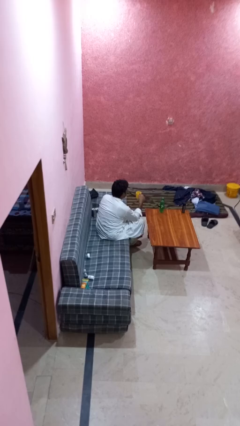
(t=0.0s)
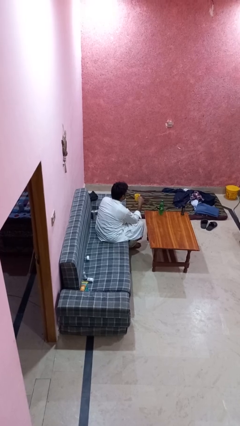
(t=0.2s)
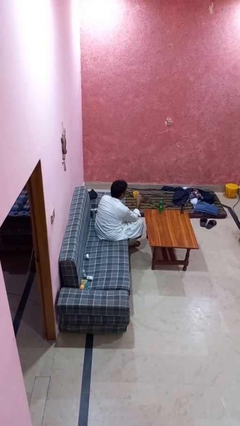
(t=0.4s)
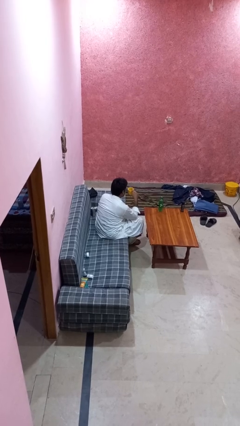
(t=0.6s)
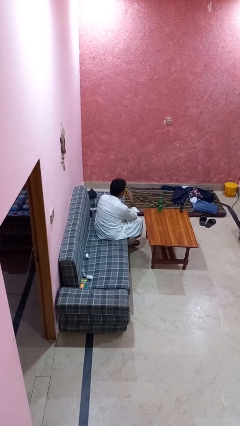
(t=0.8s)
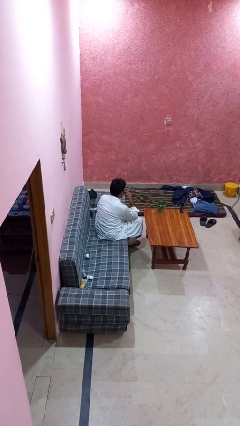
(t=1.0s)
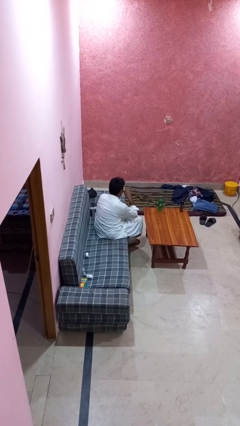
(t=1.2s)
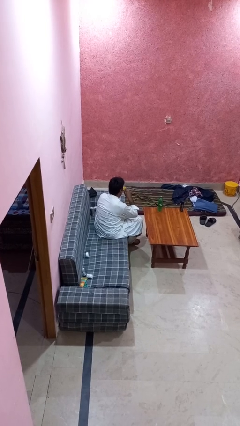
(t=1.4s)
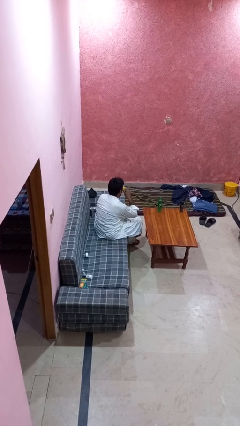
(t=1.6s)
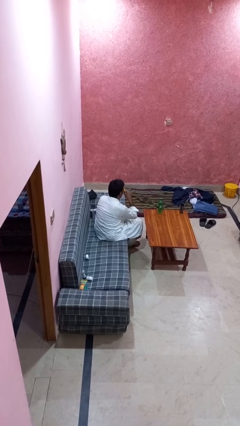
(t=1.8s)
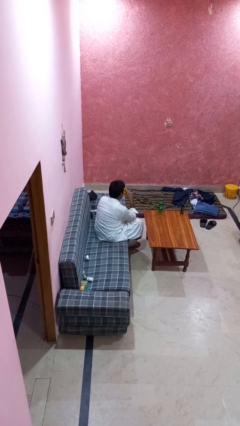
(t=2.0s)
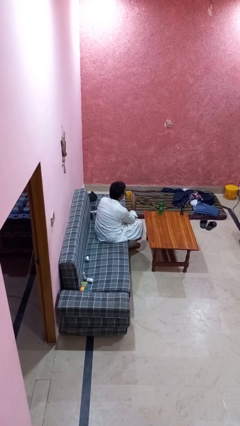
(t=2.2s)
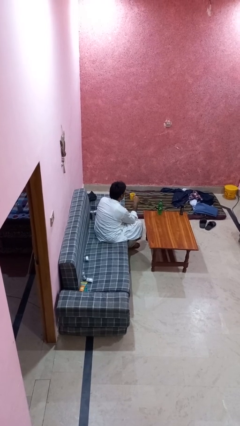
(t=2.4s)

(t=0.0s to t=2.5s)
person drinks from mug

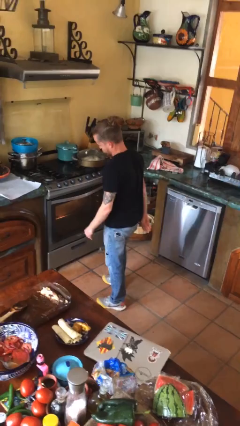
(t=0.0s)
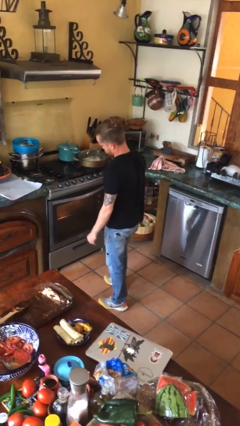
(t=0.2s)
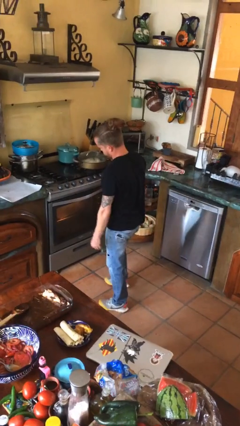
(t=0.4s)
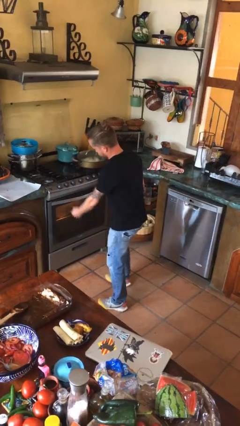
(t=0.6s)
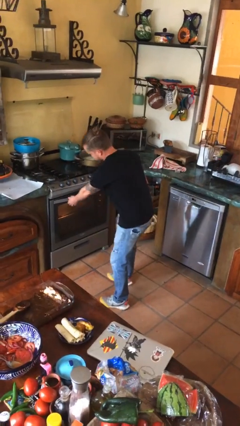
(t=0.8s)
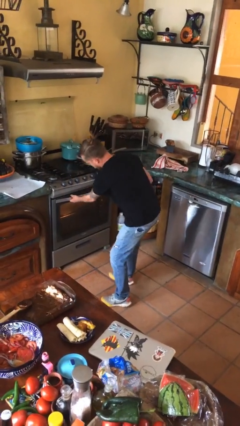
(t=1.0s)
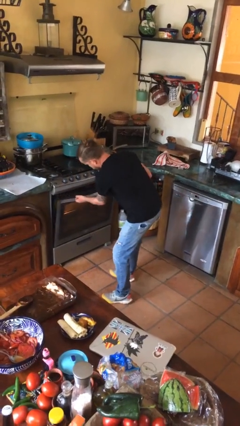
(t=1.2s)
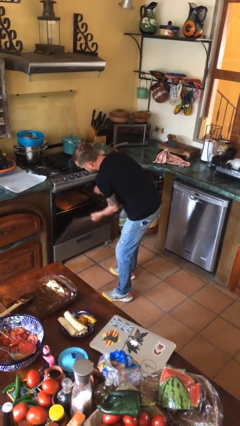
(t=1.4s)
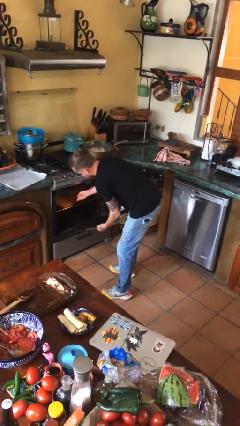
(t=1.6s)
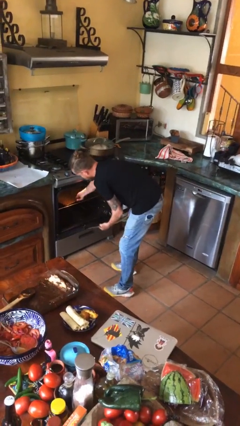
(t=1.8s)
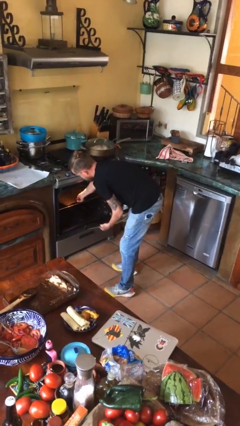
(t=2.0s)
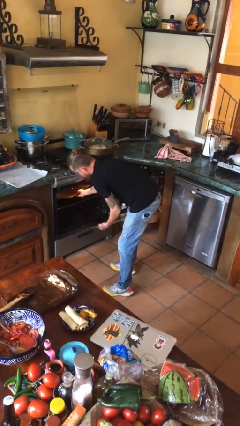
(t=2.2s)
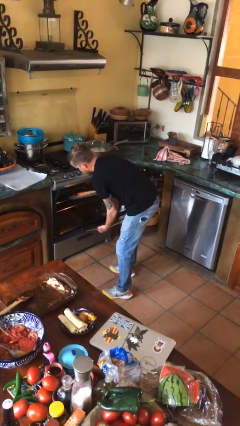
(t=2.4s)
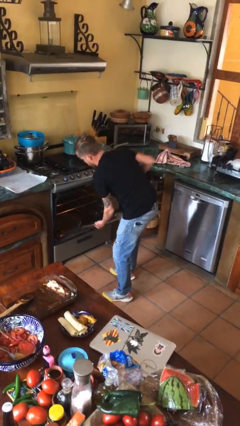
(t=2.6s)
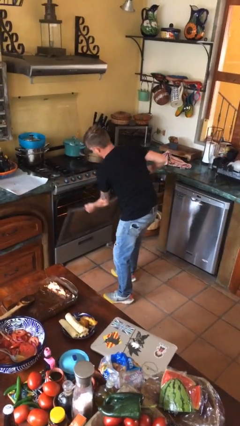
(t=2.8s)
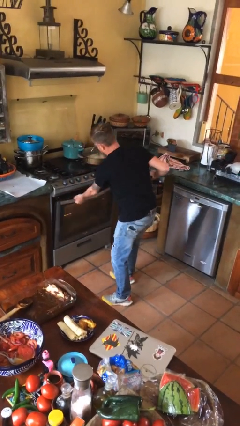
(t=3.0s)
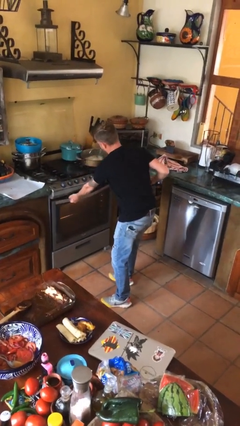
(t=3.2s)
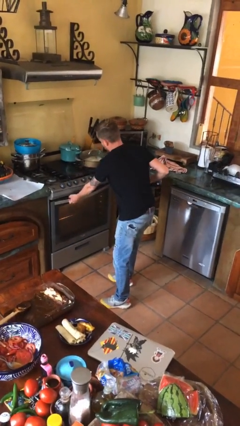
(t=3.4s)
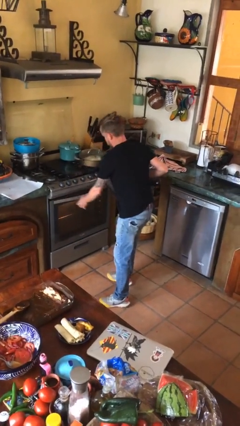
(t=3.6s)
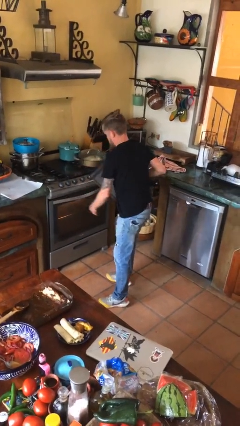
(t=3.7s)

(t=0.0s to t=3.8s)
person takes object from oven

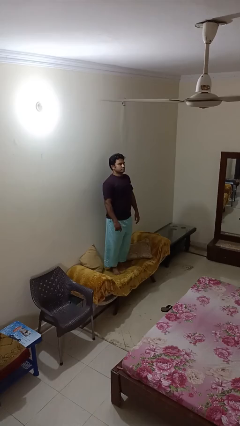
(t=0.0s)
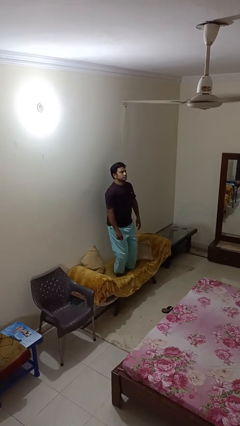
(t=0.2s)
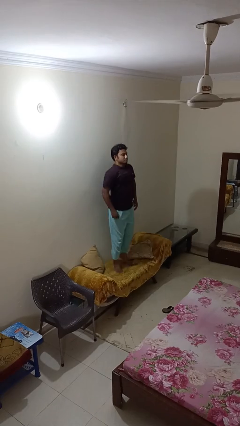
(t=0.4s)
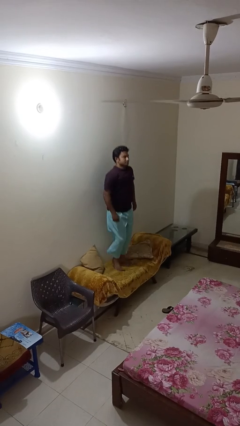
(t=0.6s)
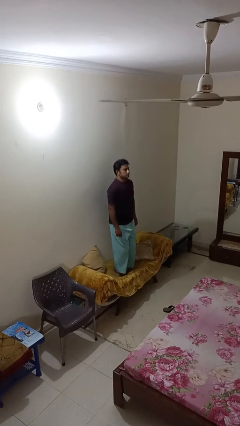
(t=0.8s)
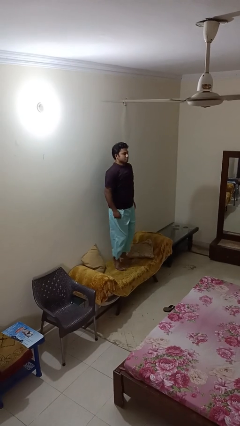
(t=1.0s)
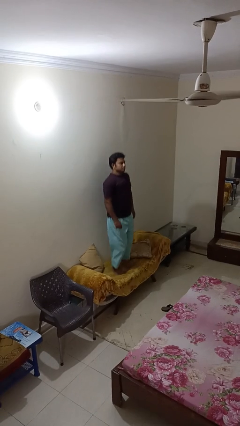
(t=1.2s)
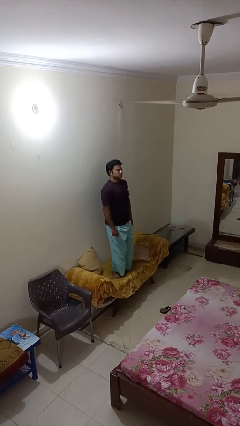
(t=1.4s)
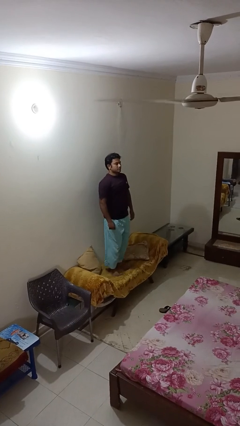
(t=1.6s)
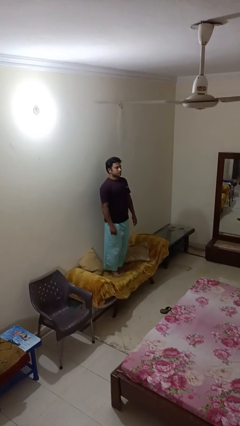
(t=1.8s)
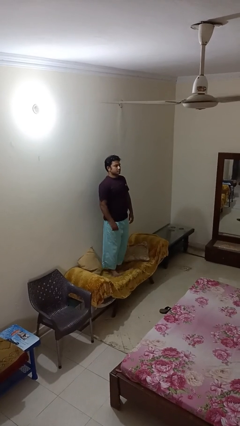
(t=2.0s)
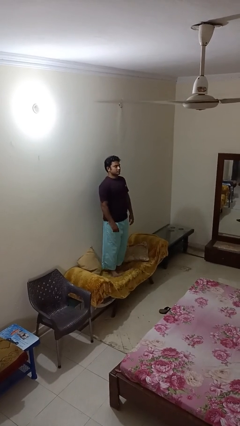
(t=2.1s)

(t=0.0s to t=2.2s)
person jumps on couch

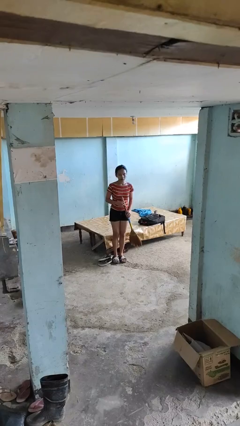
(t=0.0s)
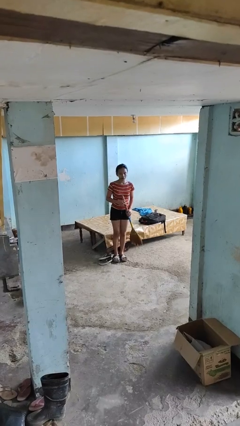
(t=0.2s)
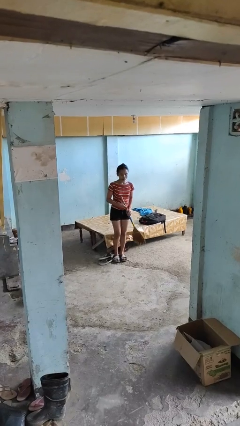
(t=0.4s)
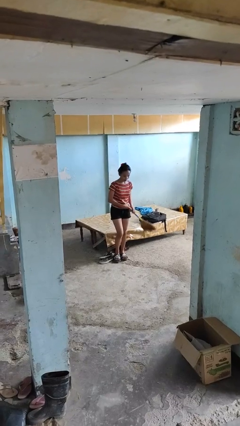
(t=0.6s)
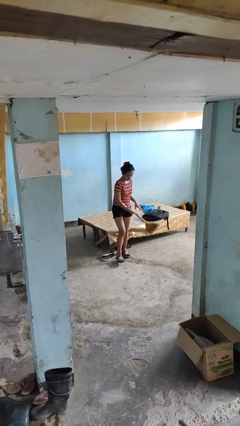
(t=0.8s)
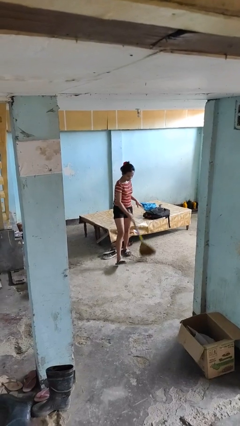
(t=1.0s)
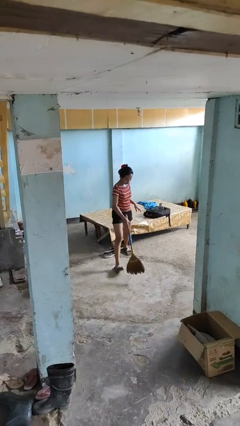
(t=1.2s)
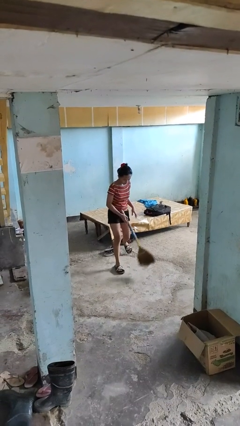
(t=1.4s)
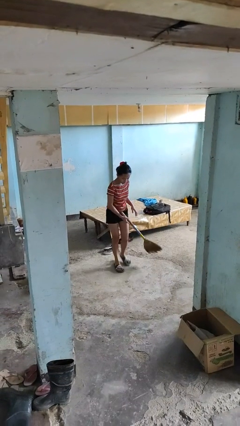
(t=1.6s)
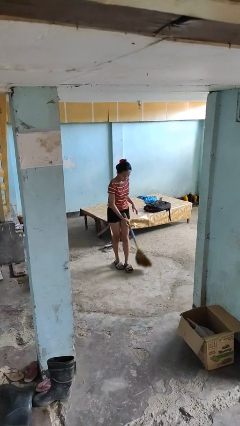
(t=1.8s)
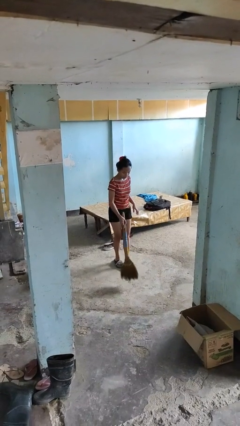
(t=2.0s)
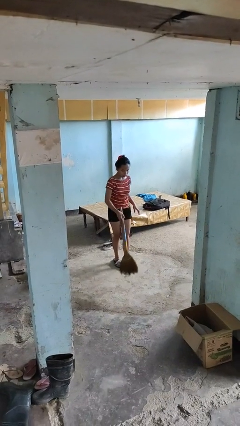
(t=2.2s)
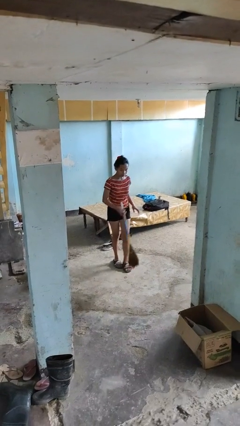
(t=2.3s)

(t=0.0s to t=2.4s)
person sweeps floor

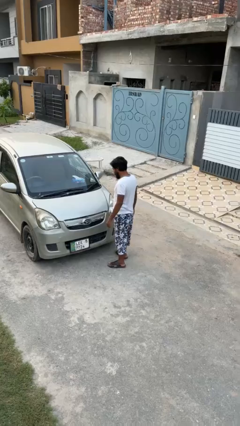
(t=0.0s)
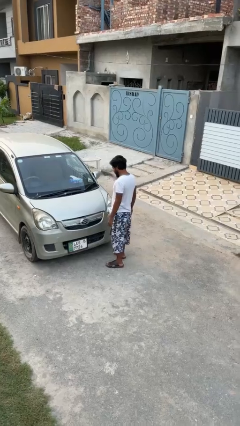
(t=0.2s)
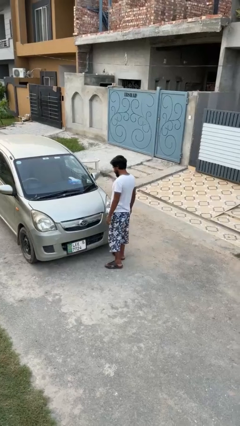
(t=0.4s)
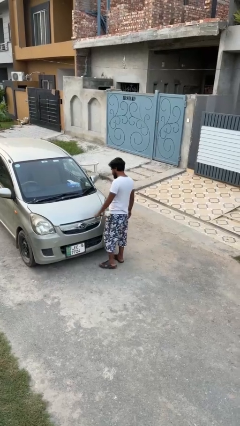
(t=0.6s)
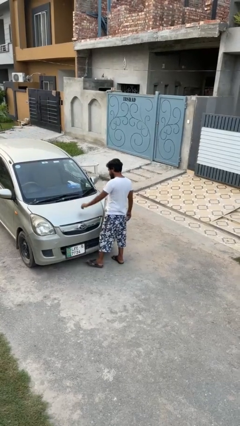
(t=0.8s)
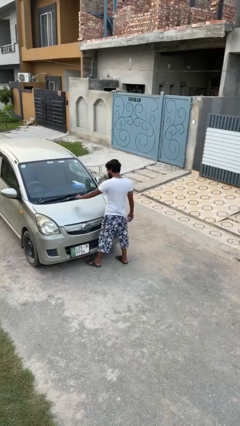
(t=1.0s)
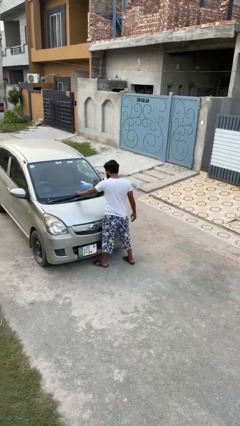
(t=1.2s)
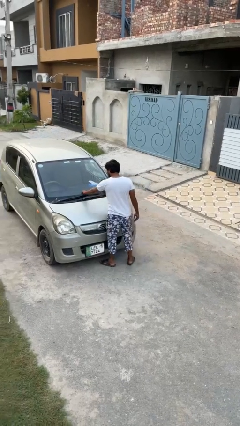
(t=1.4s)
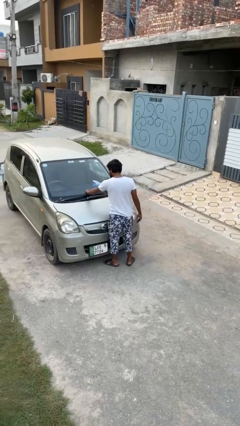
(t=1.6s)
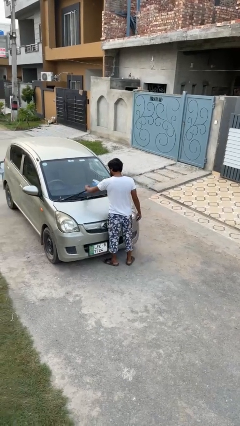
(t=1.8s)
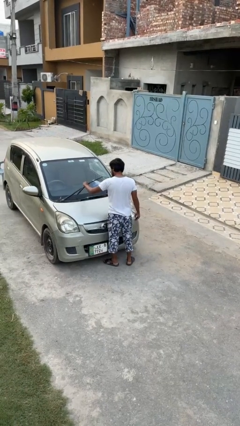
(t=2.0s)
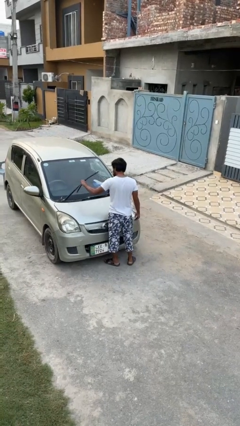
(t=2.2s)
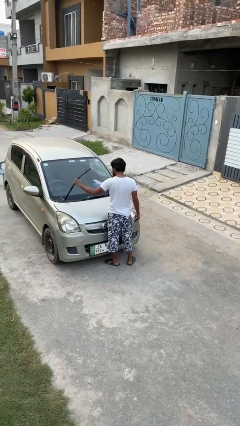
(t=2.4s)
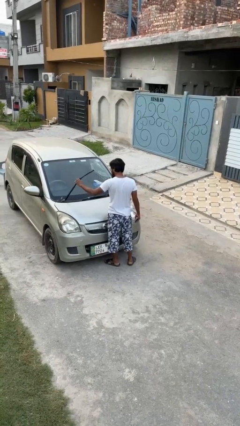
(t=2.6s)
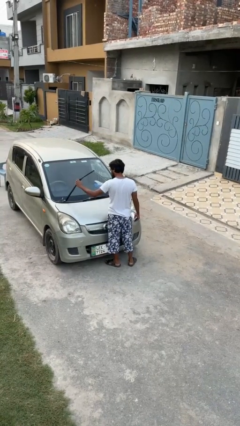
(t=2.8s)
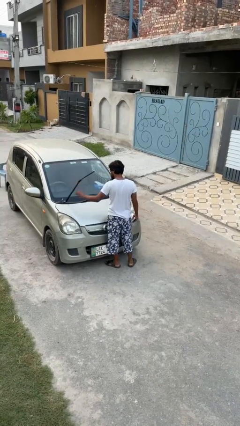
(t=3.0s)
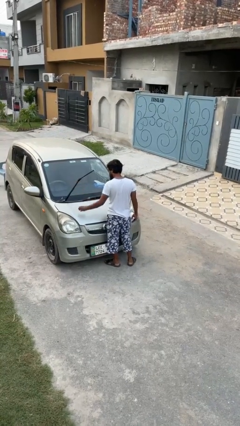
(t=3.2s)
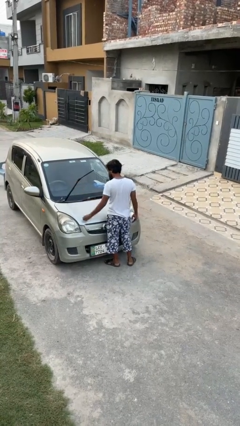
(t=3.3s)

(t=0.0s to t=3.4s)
person flips up car wipers

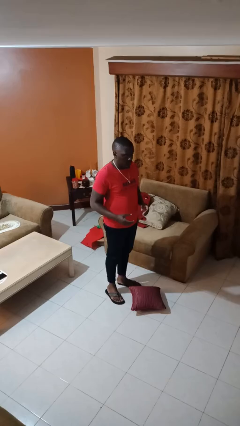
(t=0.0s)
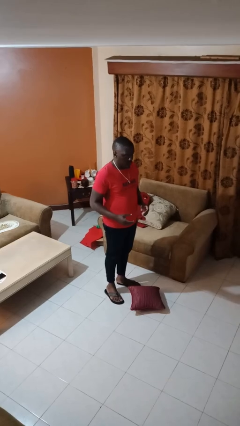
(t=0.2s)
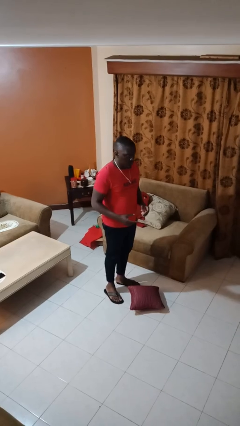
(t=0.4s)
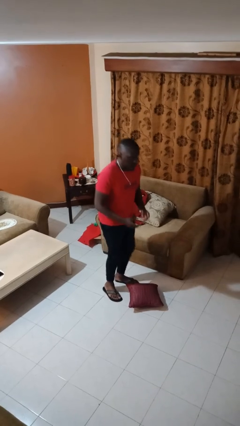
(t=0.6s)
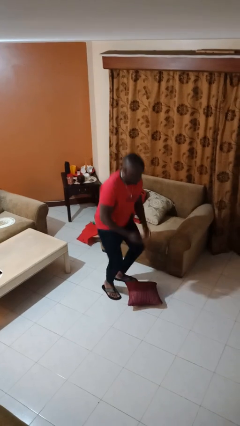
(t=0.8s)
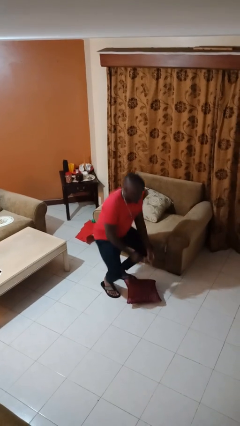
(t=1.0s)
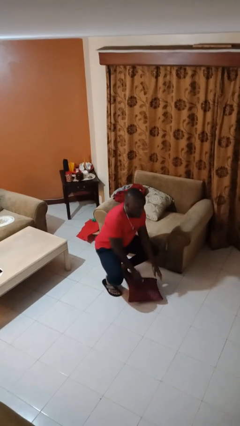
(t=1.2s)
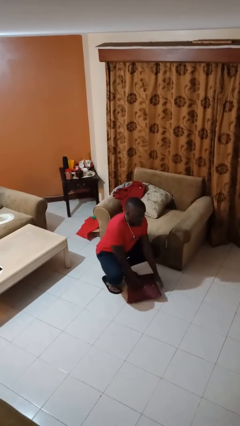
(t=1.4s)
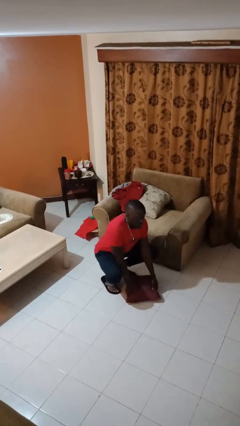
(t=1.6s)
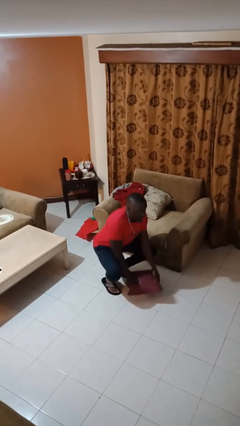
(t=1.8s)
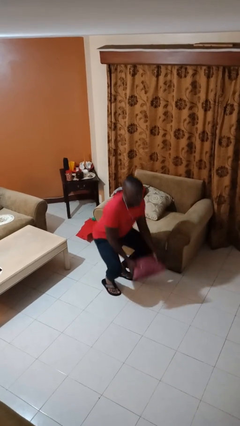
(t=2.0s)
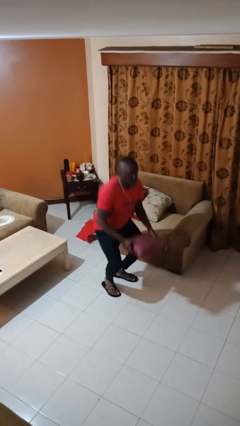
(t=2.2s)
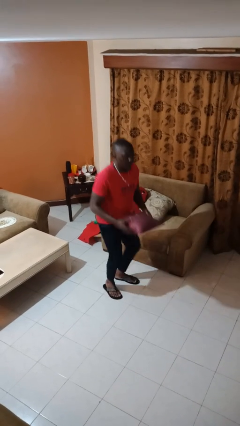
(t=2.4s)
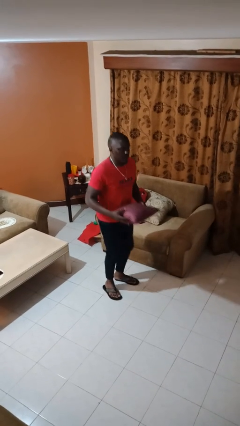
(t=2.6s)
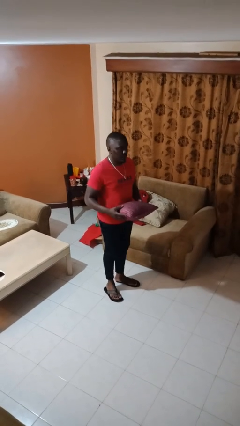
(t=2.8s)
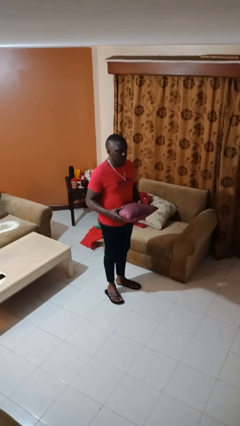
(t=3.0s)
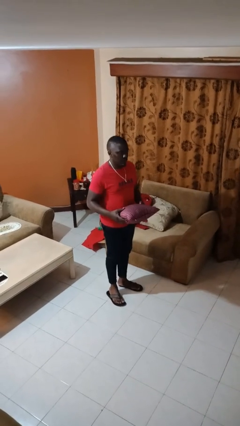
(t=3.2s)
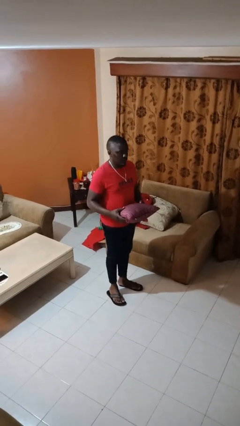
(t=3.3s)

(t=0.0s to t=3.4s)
person picks up object from floor
